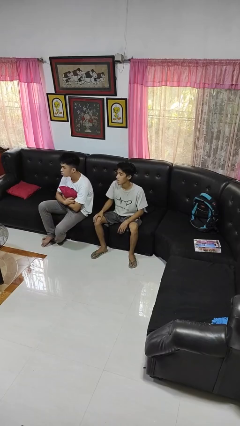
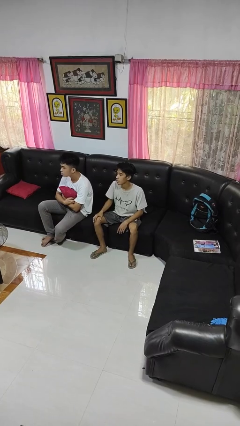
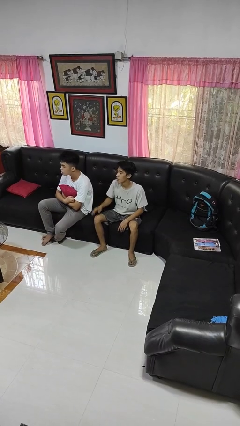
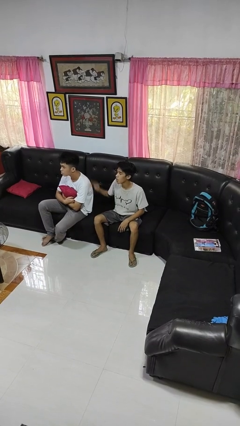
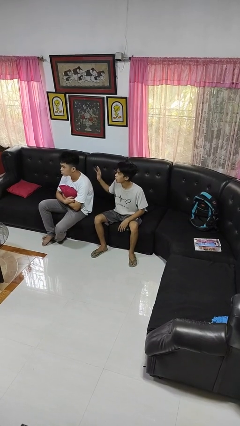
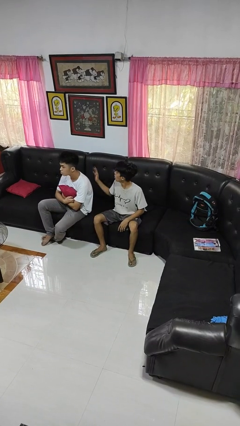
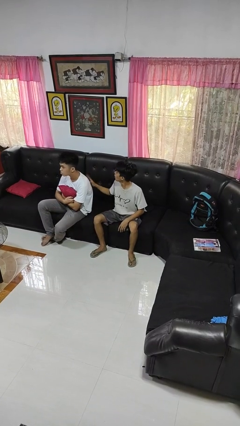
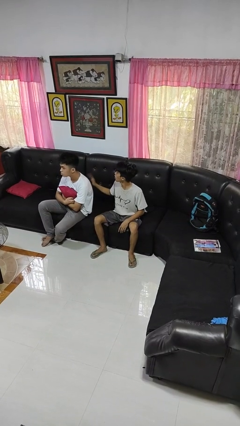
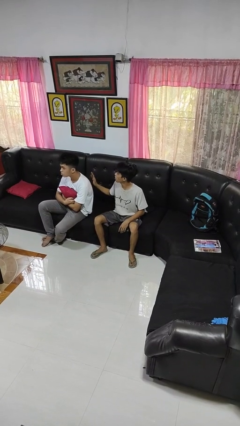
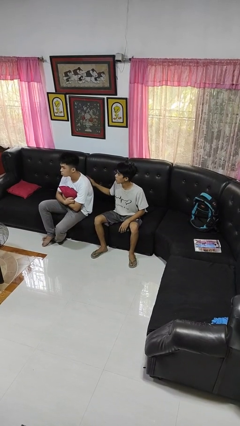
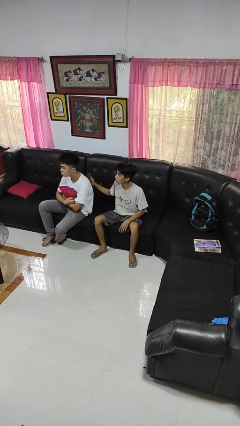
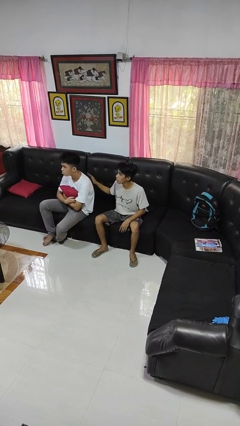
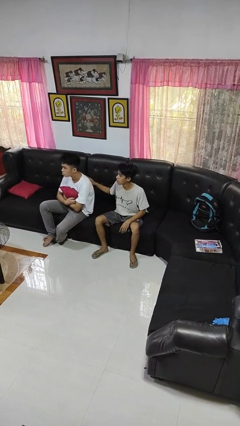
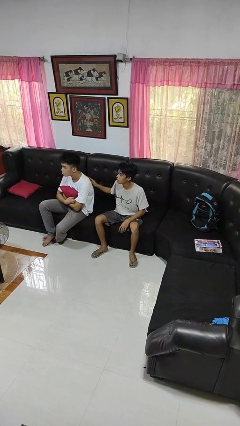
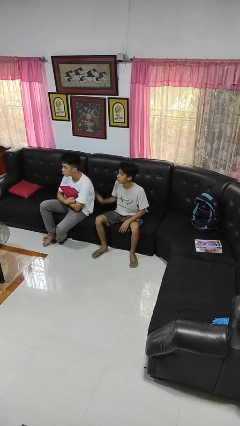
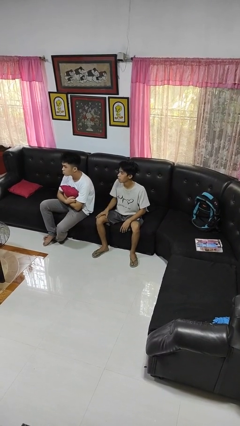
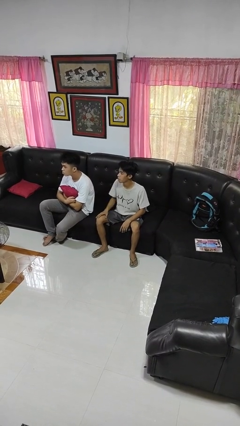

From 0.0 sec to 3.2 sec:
person touches back of person

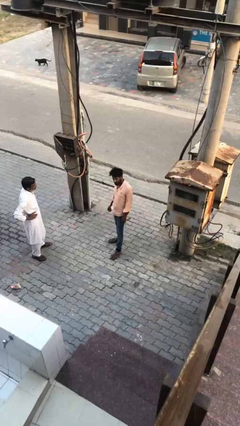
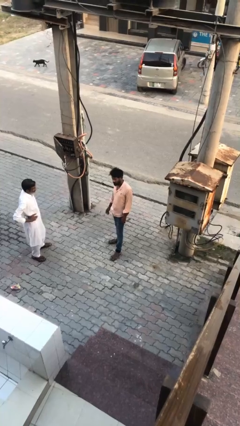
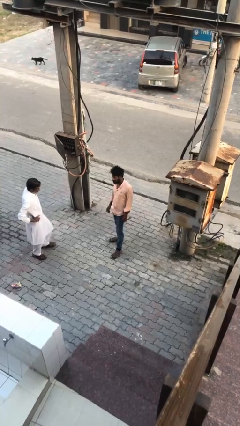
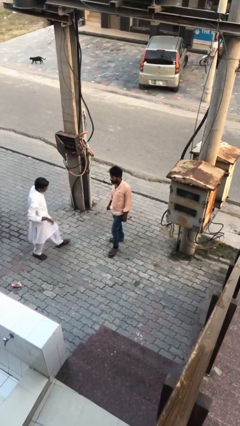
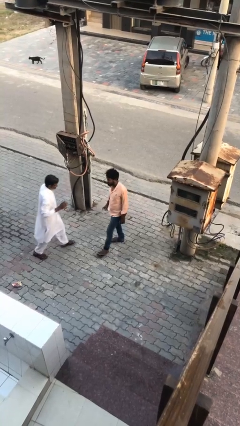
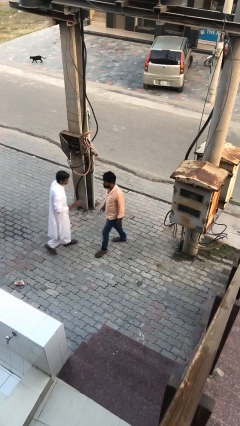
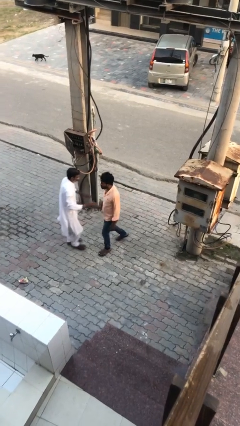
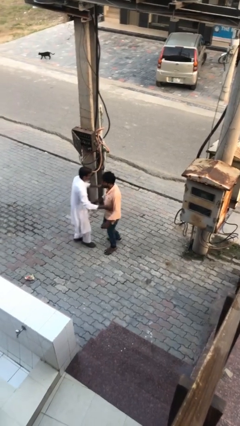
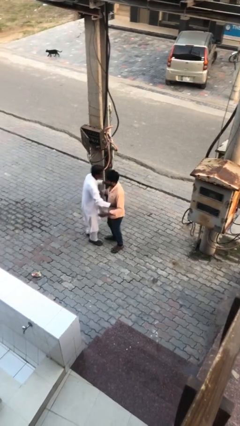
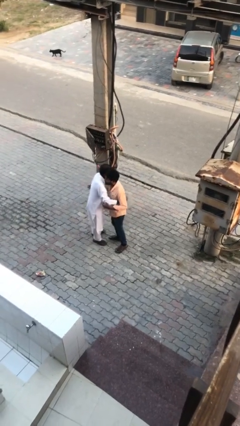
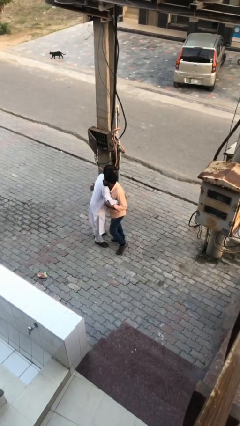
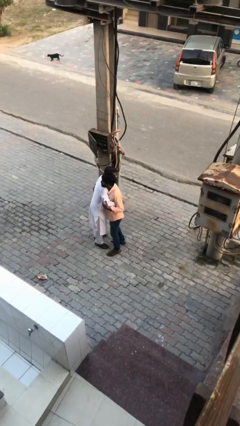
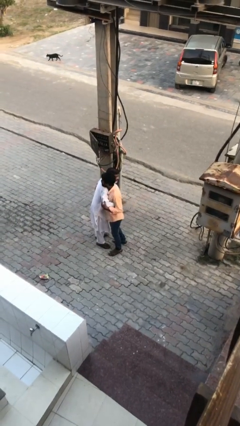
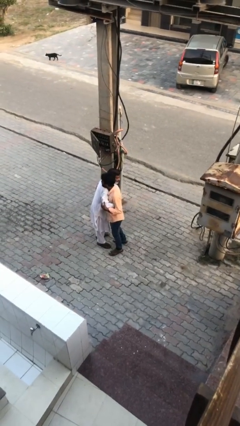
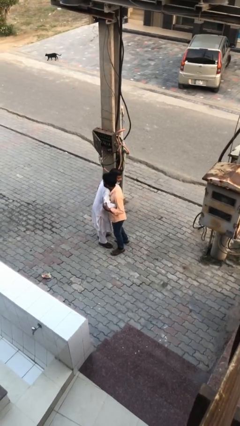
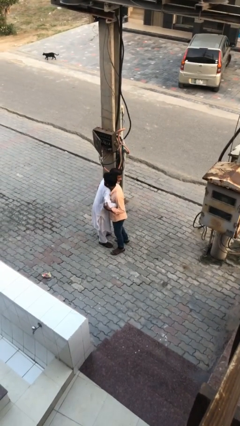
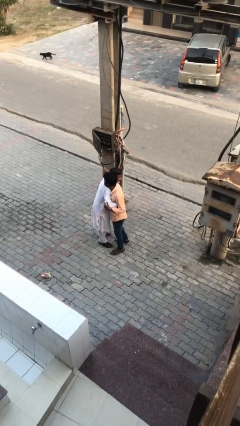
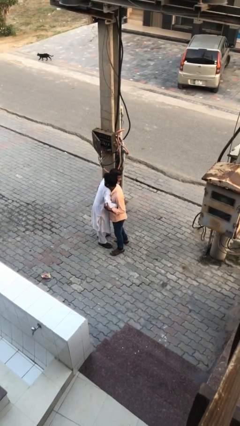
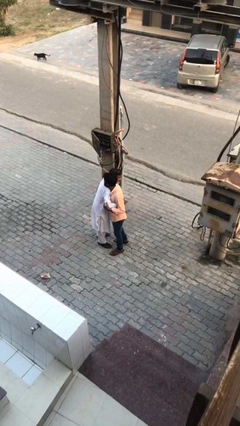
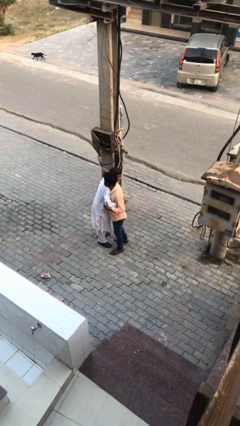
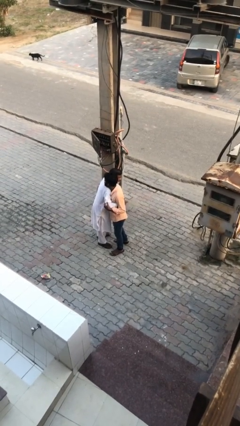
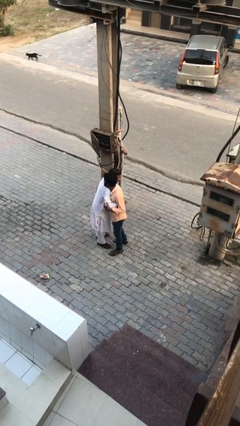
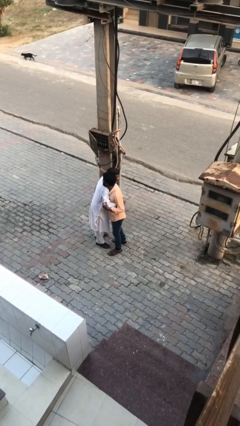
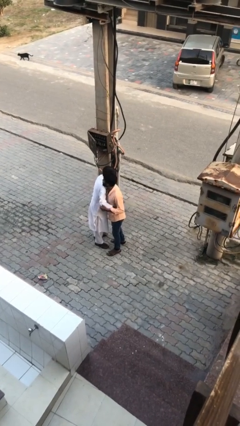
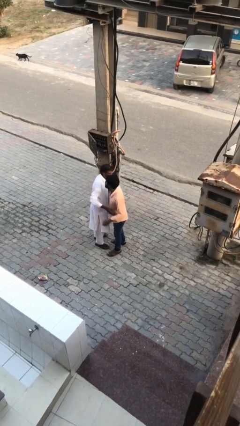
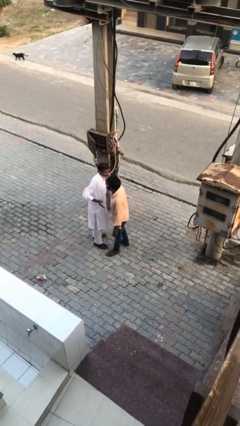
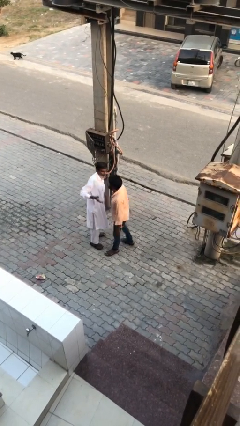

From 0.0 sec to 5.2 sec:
person embraces person

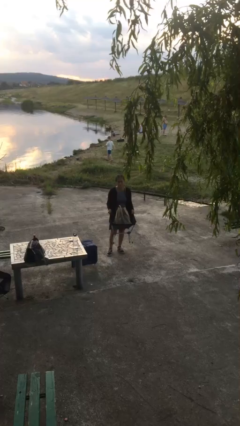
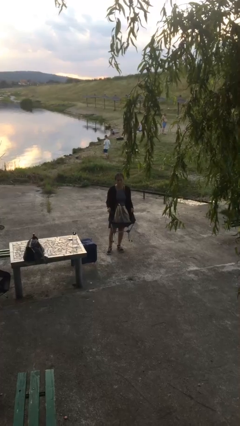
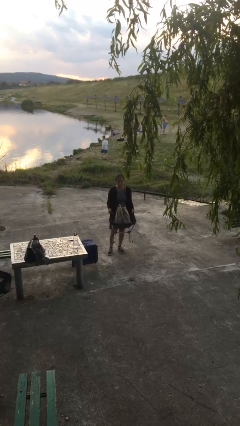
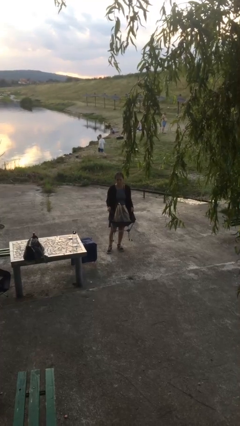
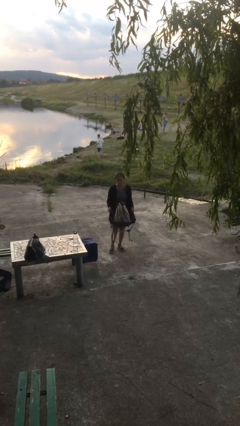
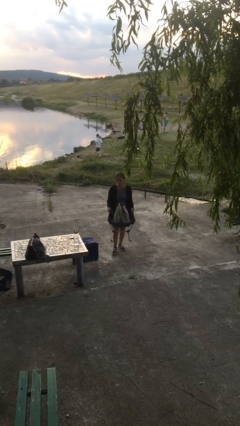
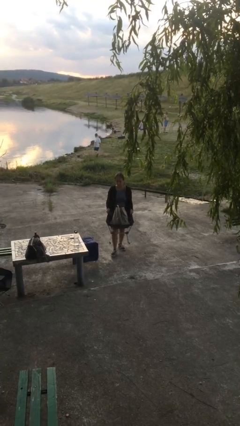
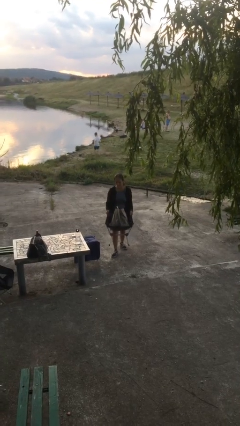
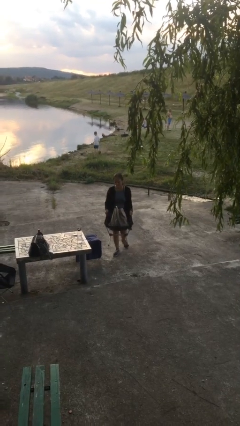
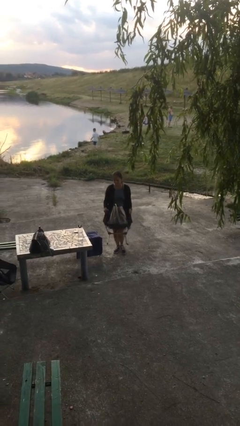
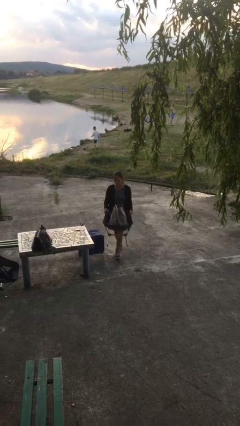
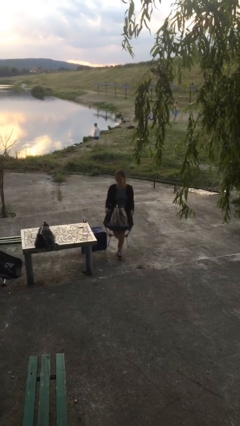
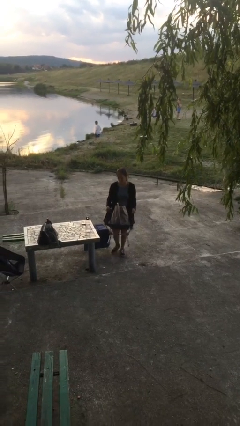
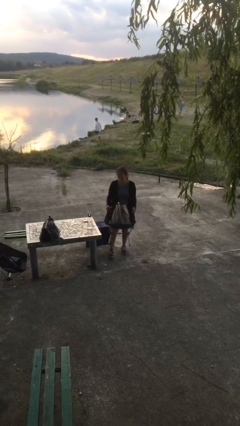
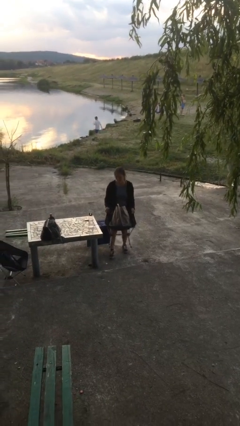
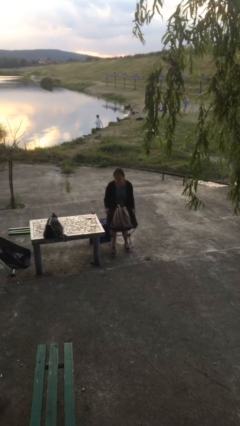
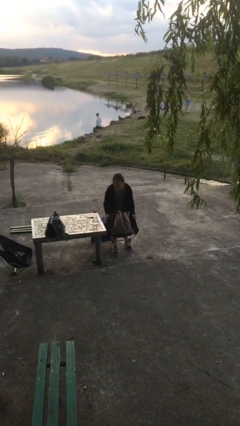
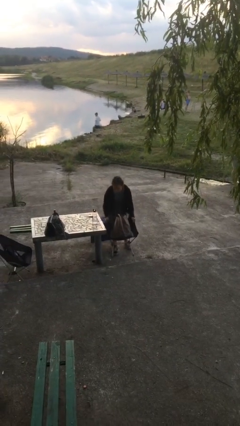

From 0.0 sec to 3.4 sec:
person carries heavy object

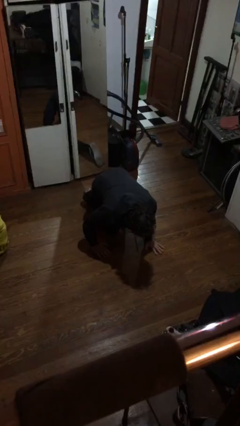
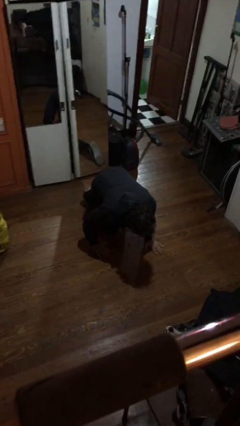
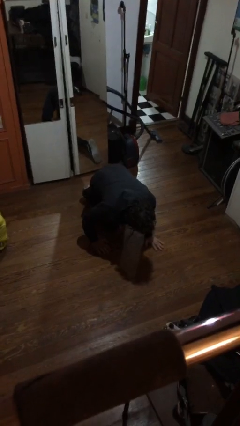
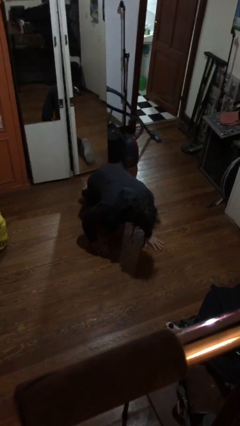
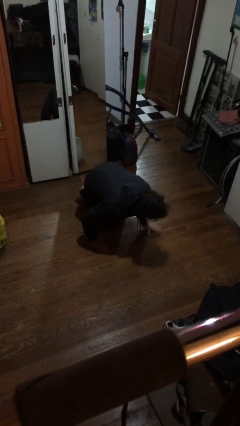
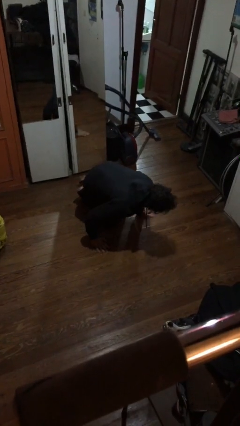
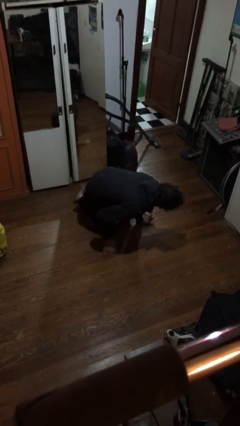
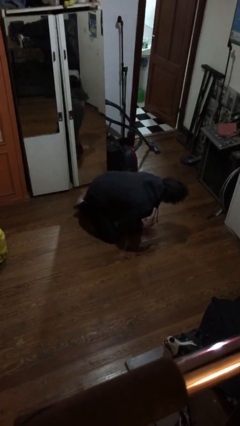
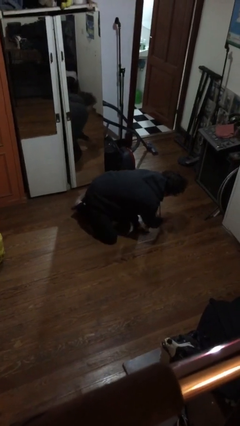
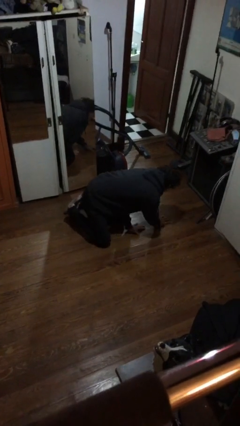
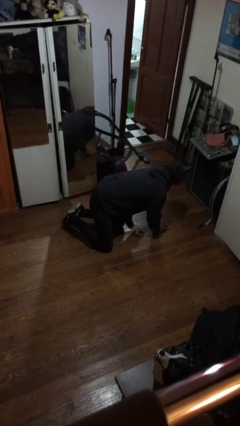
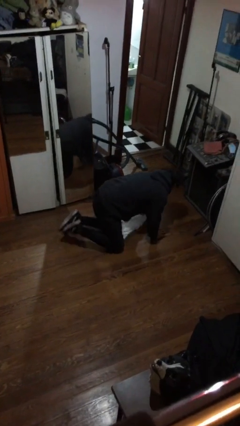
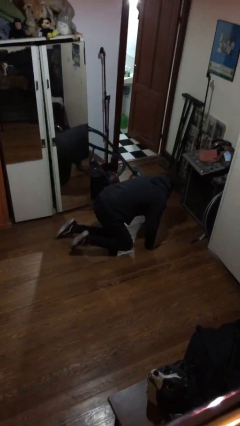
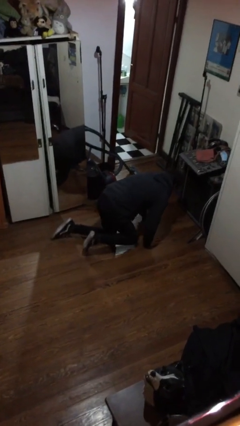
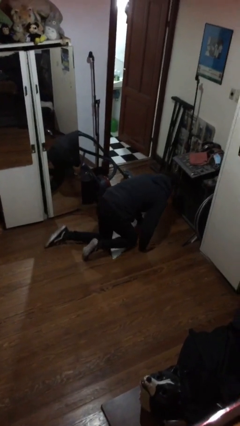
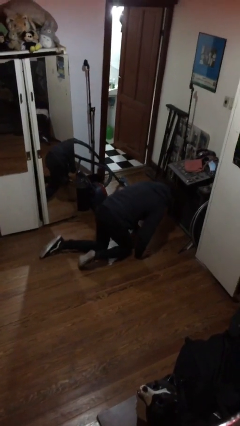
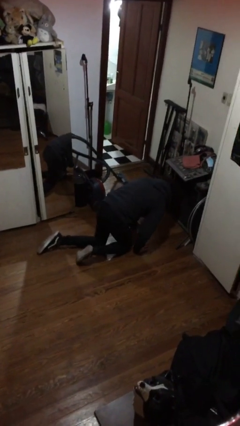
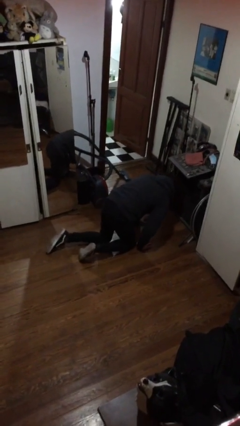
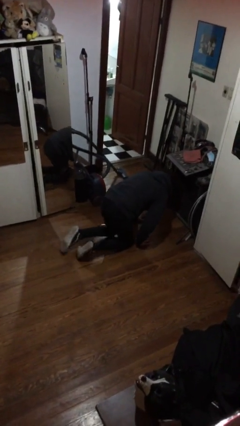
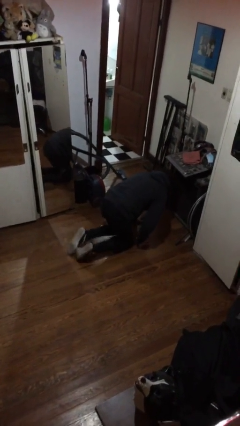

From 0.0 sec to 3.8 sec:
person crawls

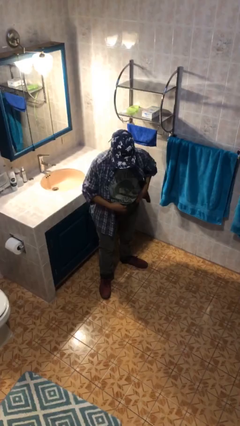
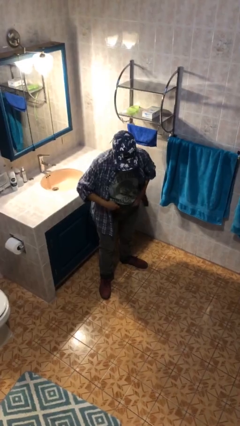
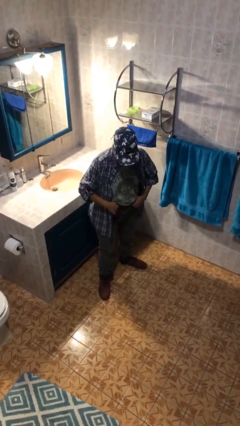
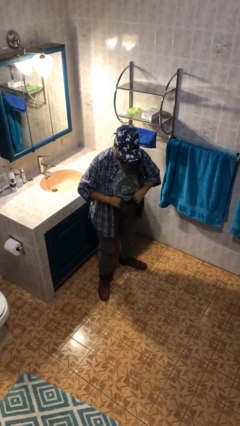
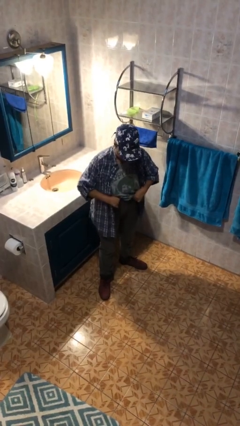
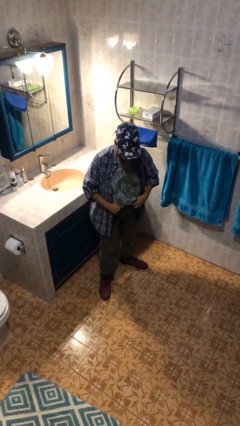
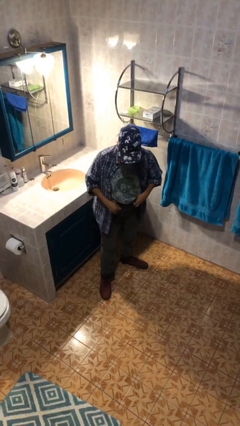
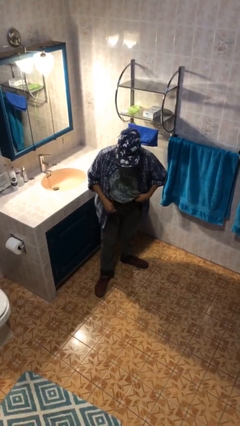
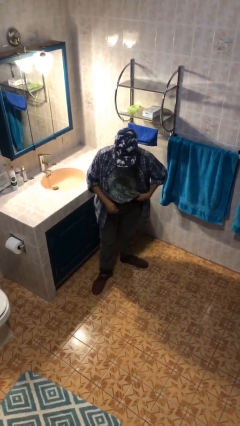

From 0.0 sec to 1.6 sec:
person hikes up pants
